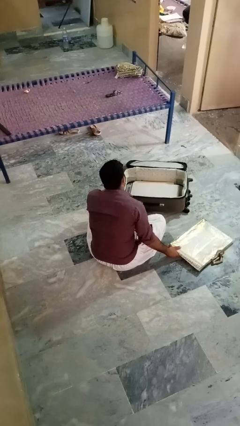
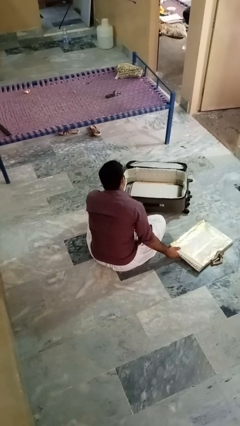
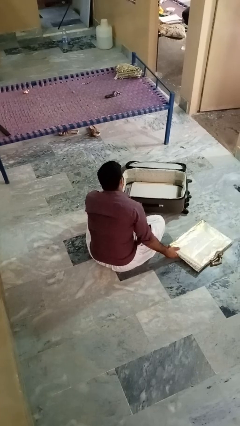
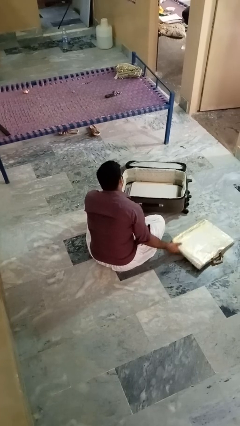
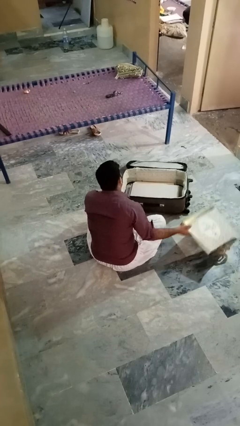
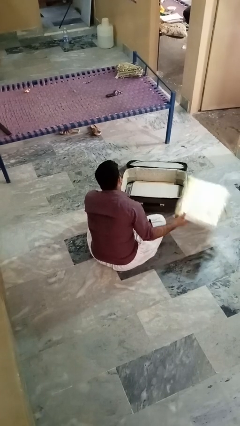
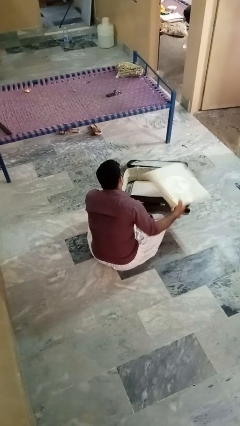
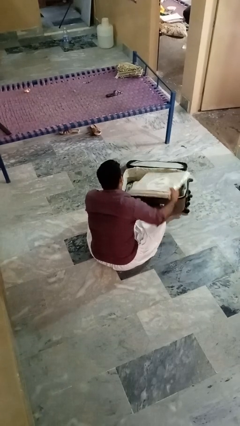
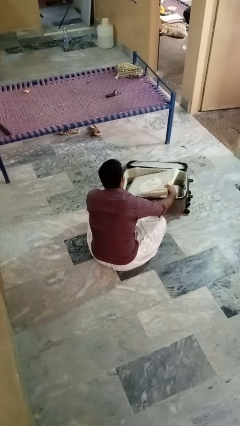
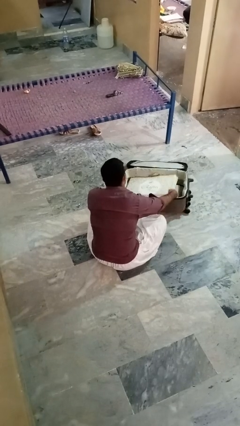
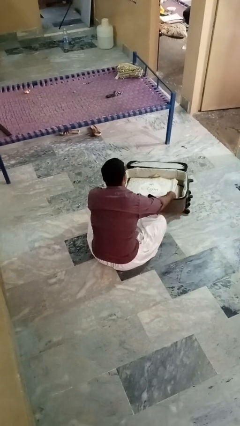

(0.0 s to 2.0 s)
person puts object into bag

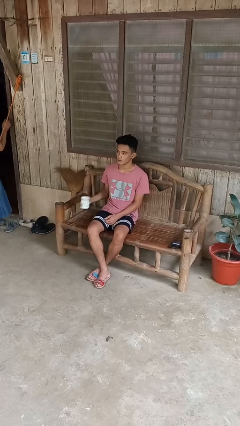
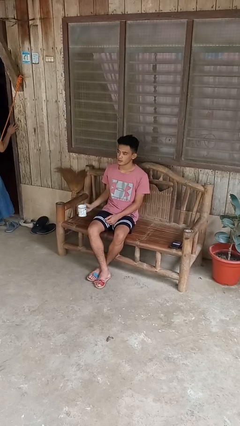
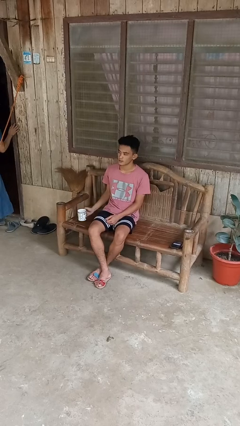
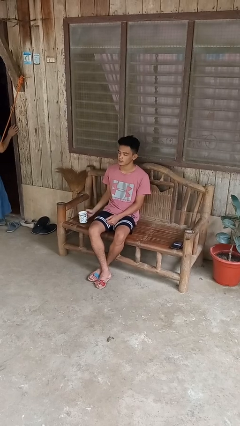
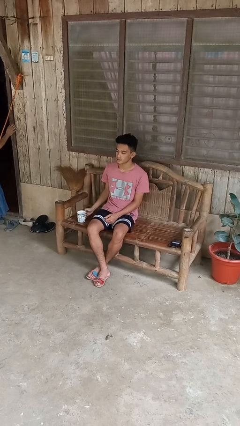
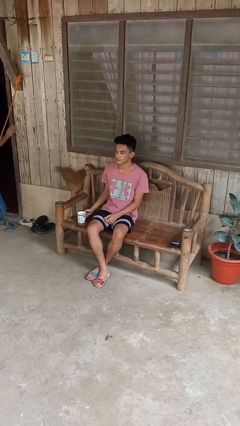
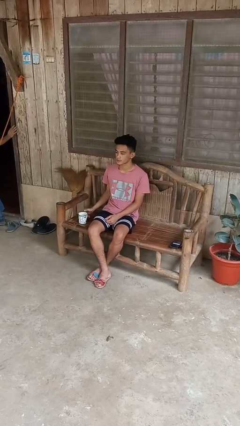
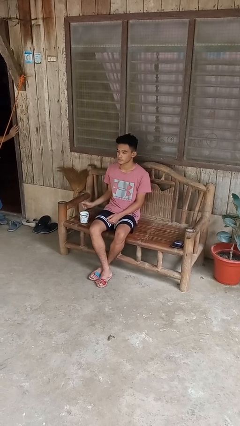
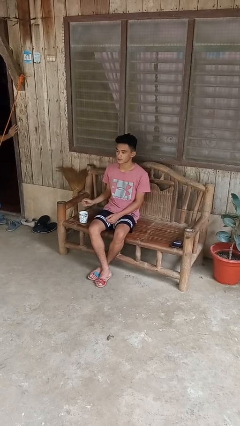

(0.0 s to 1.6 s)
person puts down object on table

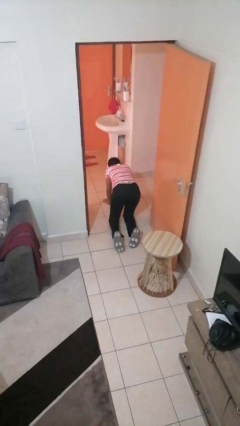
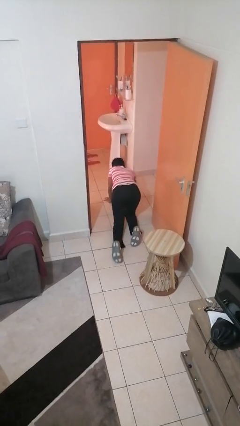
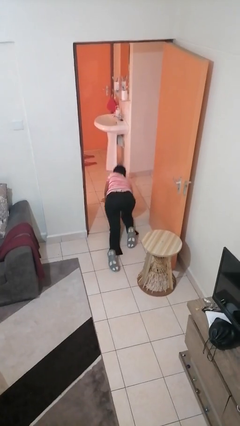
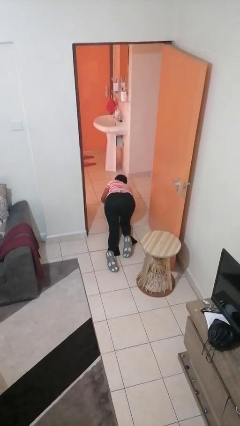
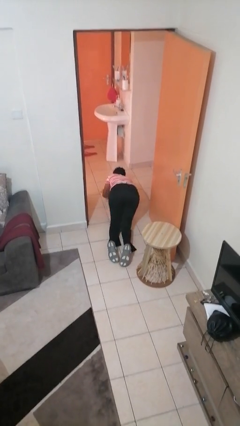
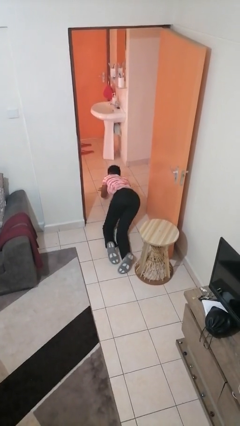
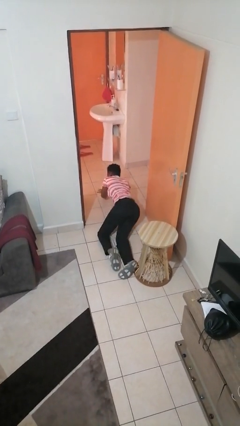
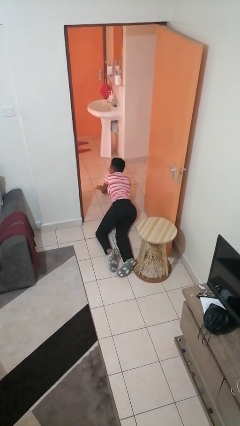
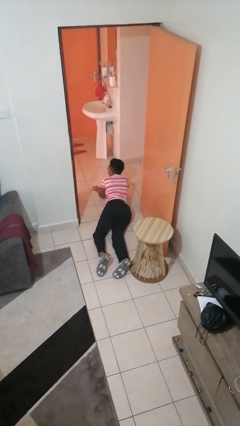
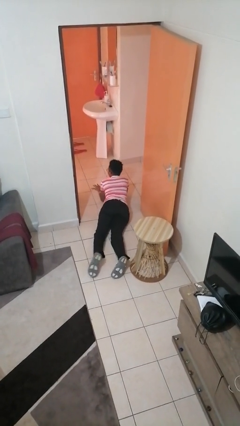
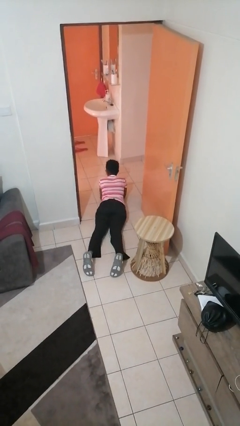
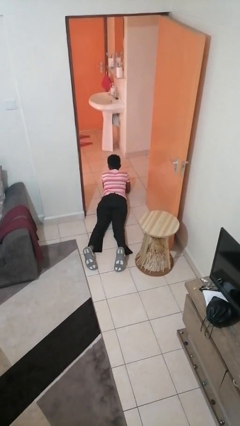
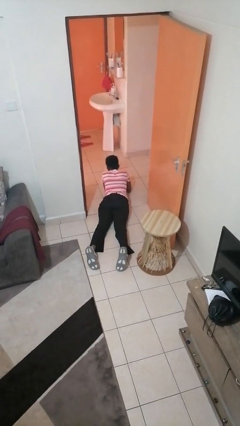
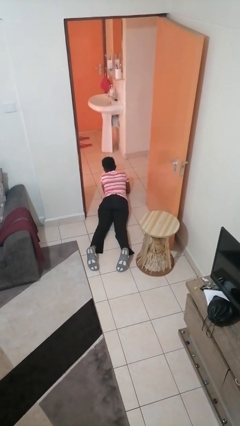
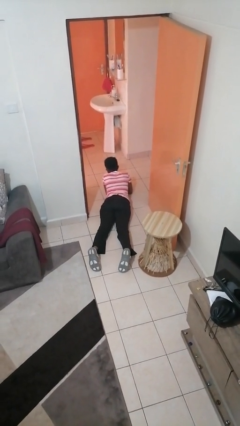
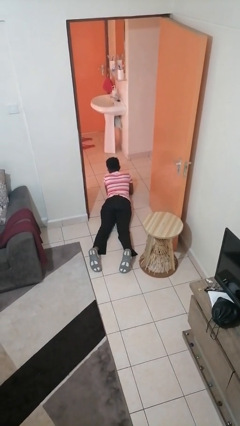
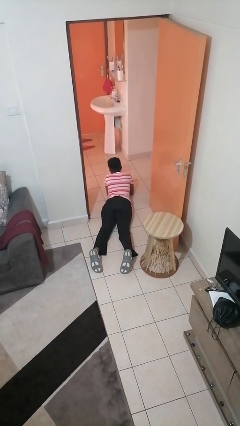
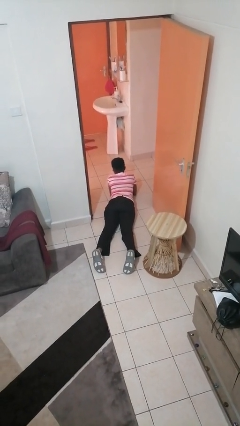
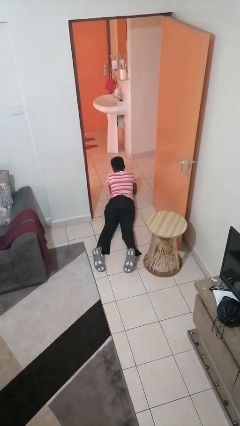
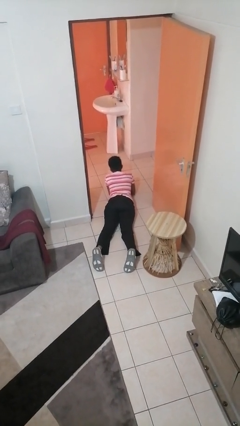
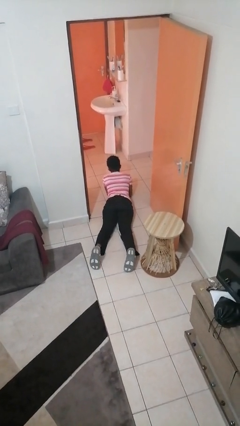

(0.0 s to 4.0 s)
person lies down on floor

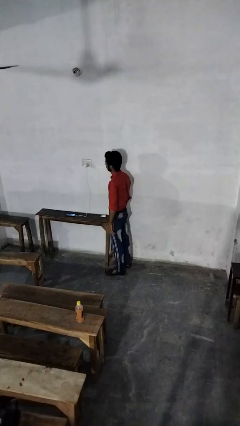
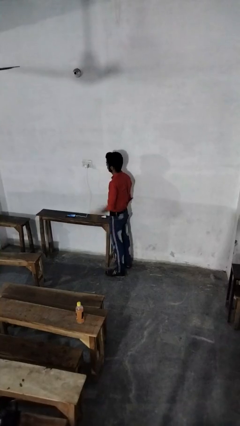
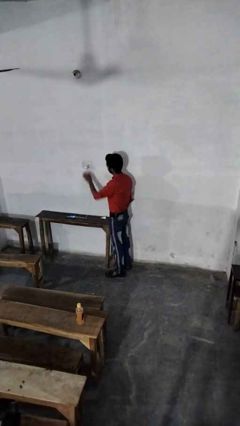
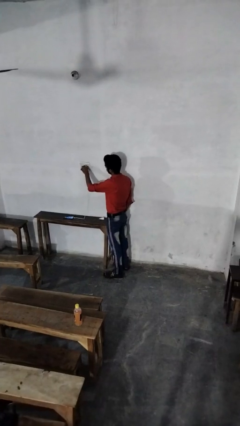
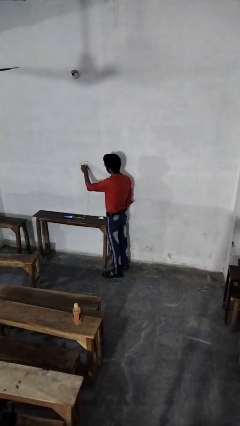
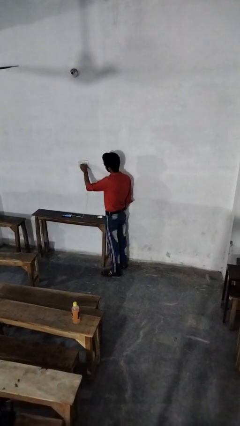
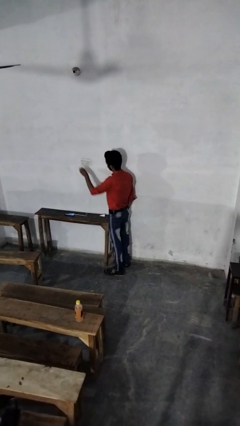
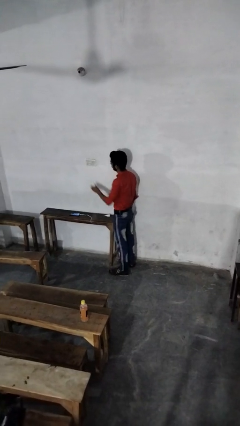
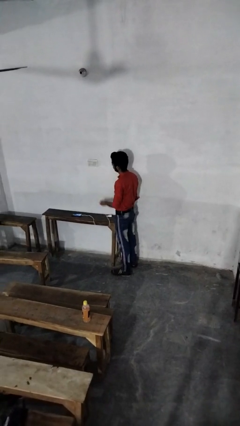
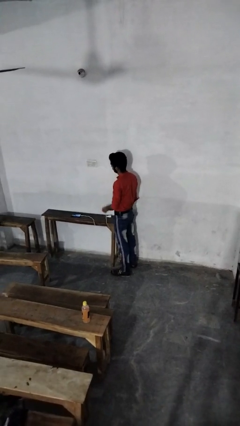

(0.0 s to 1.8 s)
person unplugs from electrical socket

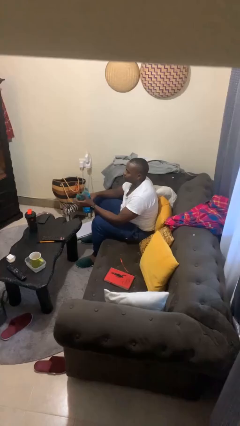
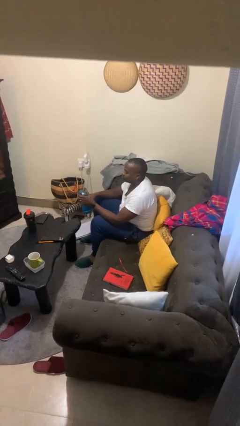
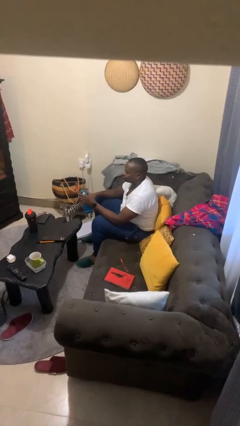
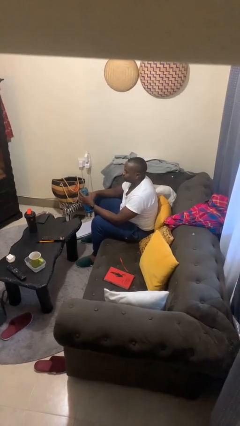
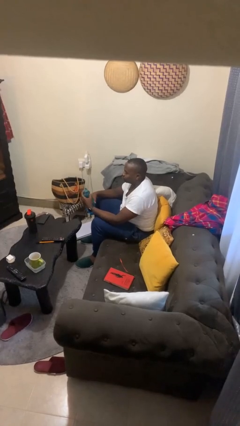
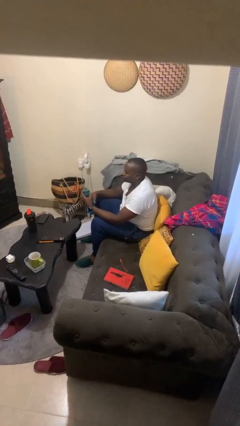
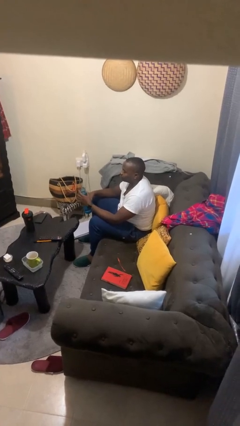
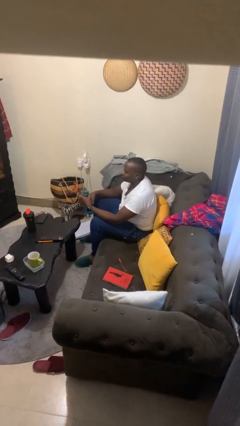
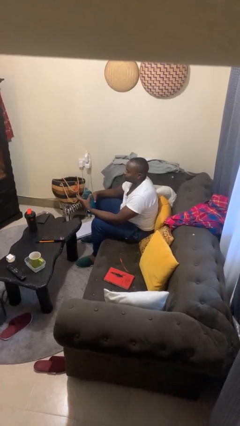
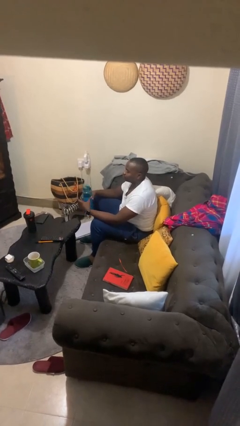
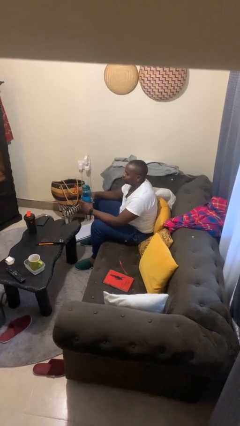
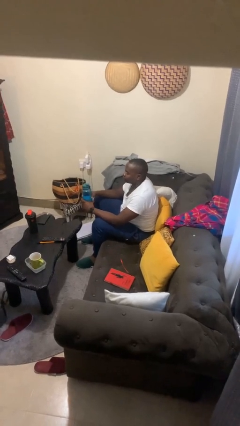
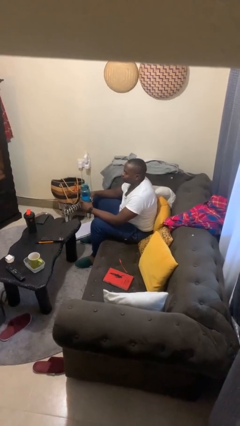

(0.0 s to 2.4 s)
person screws lid to bottle

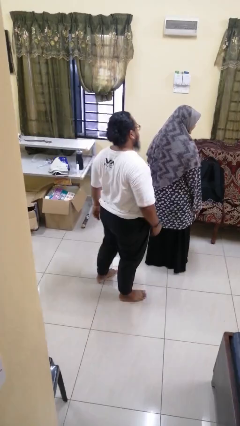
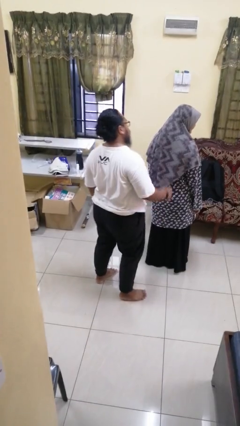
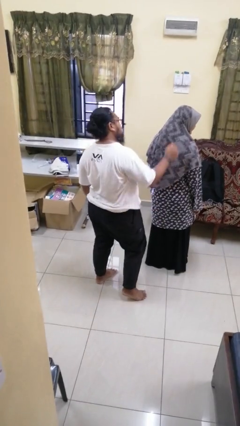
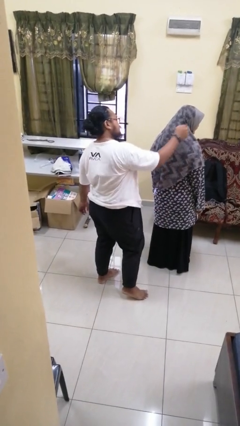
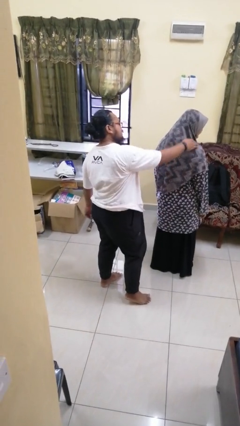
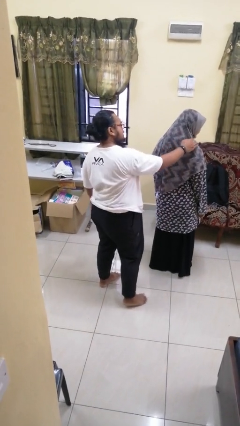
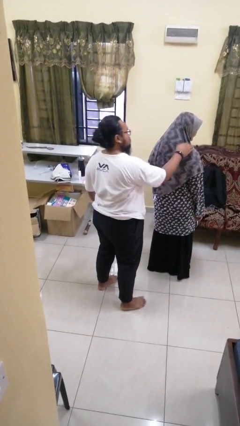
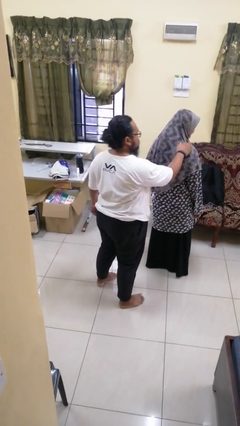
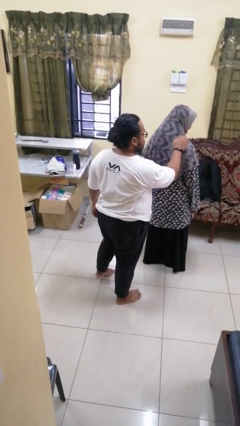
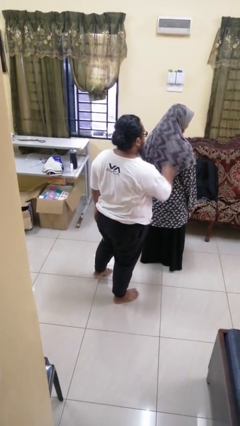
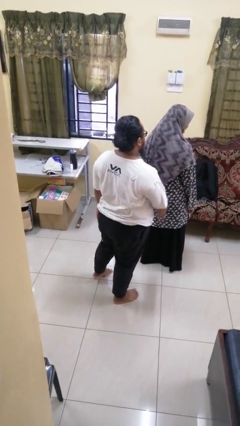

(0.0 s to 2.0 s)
person touches back of person

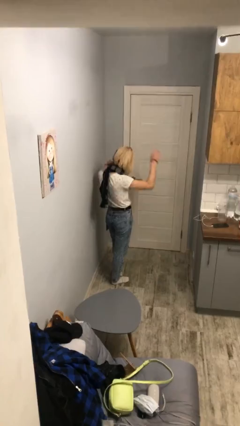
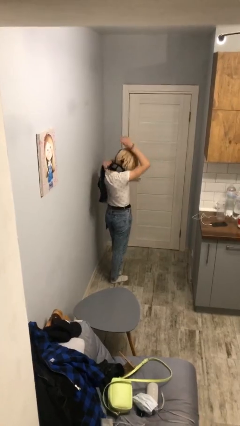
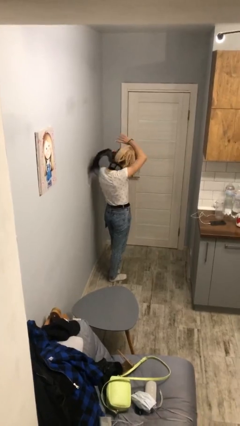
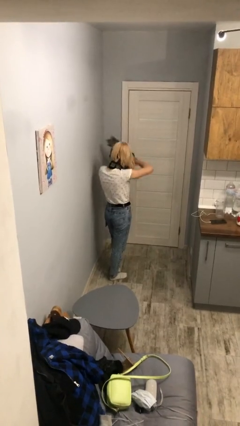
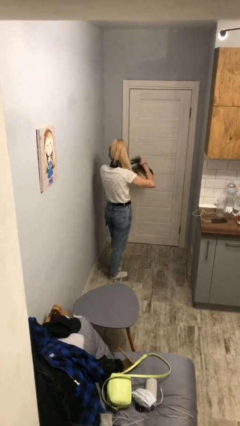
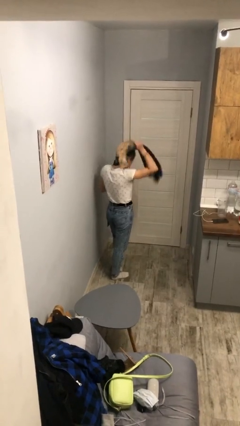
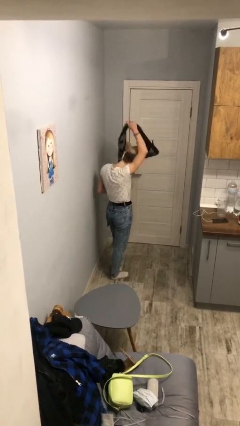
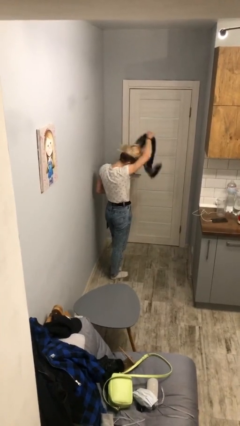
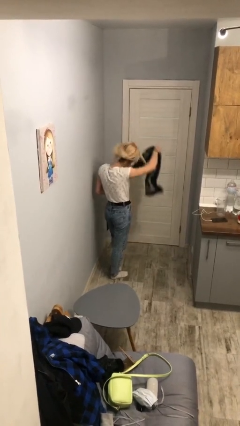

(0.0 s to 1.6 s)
person takes off scarf

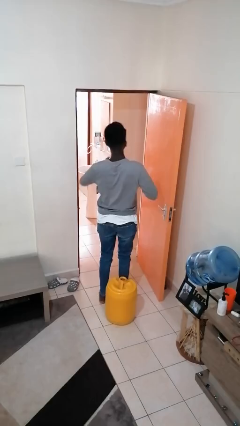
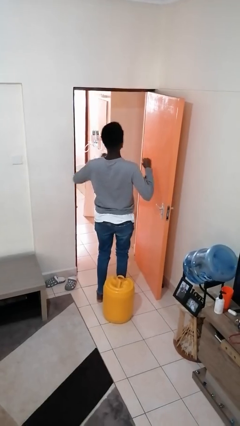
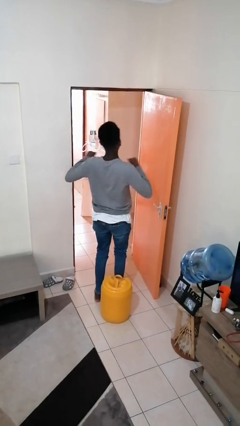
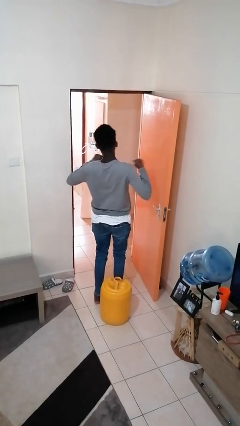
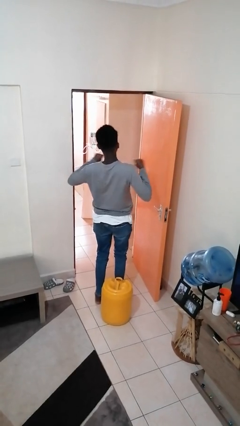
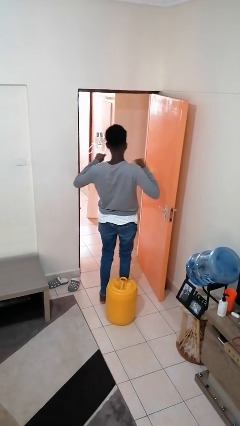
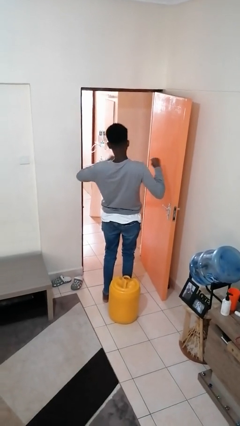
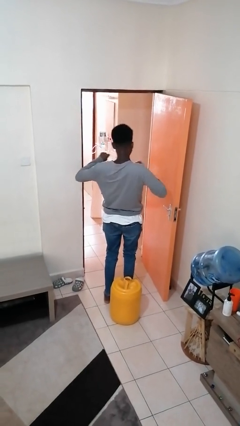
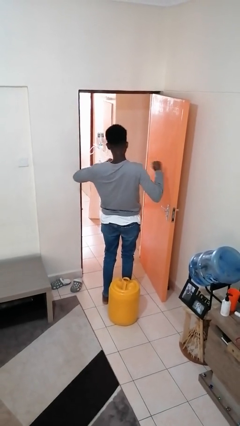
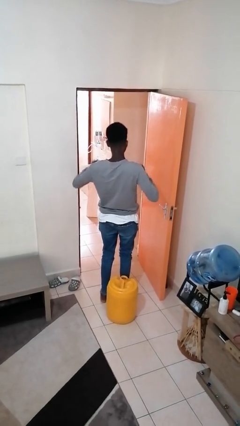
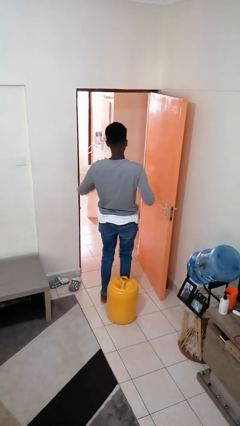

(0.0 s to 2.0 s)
person drums on chest

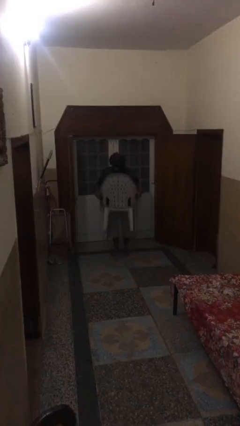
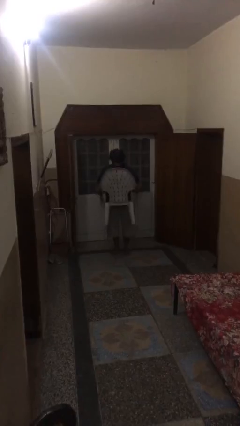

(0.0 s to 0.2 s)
person carries heavy object
